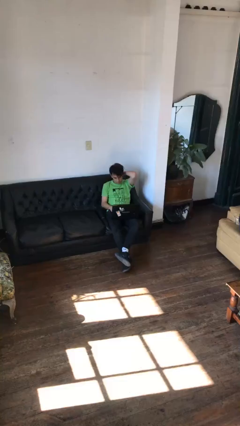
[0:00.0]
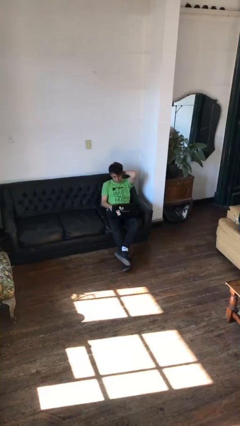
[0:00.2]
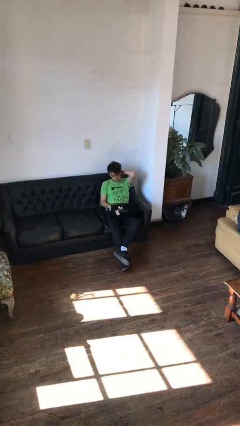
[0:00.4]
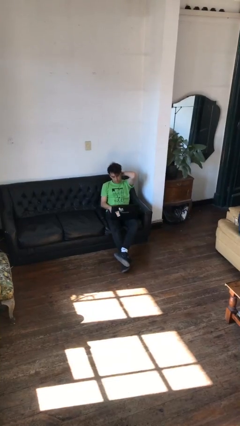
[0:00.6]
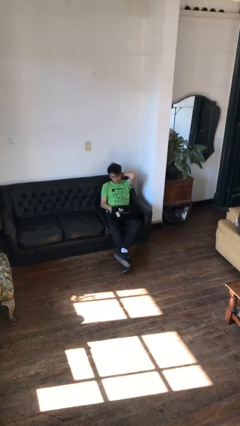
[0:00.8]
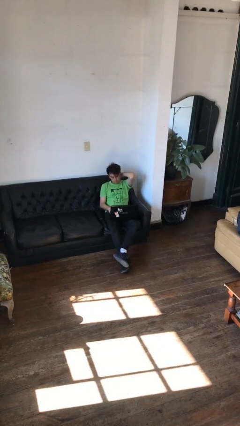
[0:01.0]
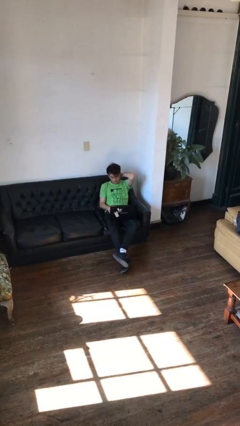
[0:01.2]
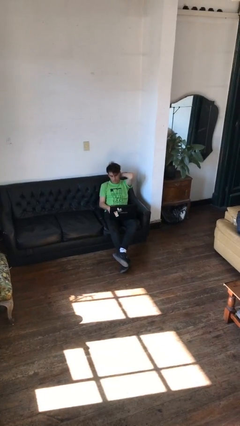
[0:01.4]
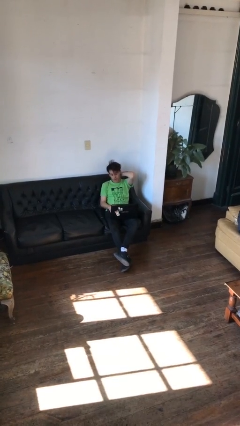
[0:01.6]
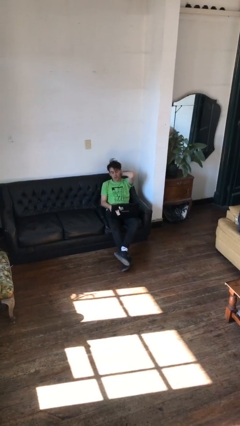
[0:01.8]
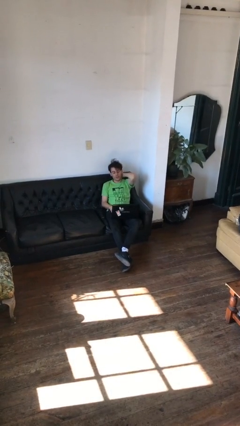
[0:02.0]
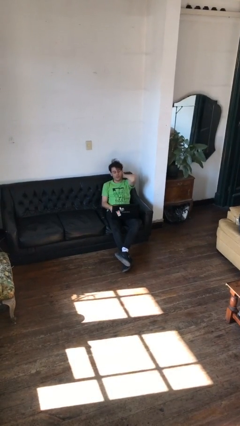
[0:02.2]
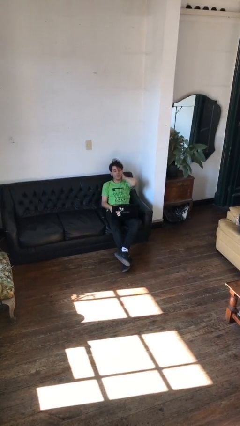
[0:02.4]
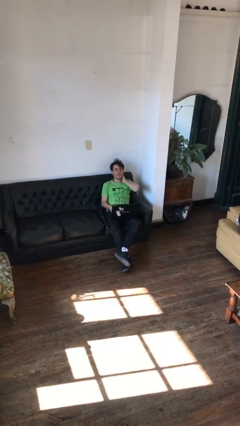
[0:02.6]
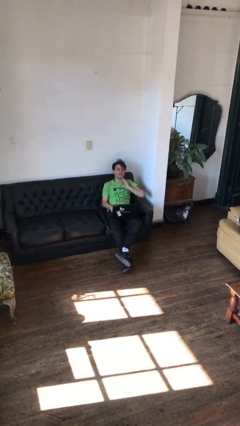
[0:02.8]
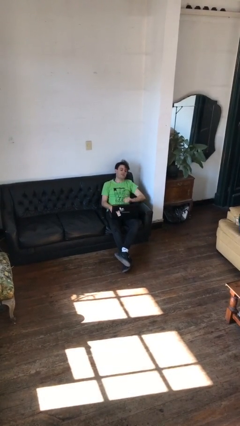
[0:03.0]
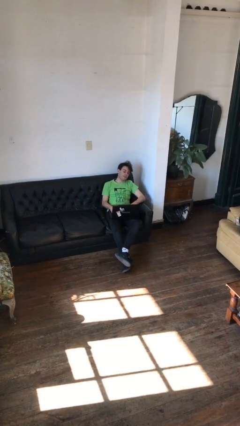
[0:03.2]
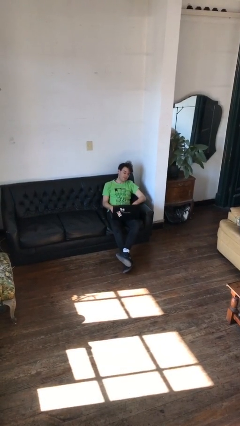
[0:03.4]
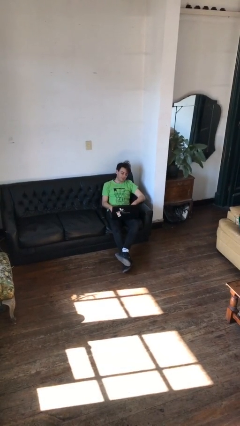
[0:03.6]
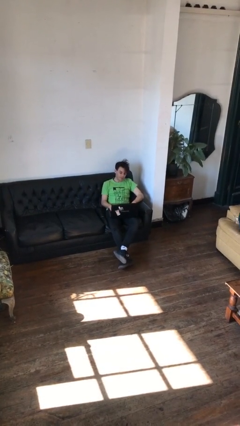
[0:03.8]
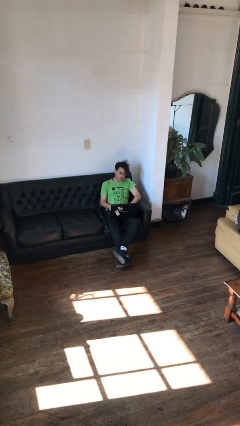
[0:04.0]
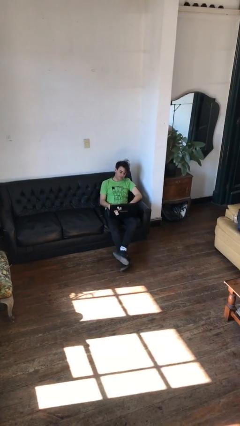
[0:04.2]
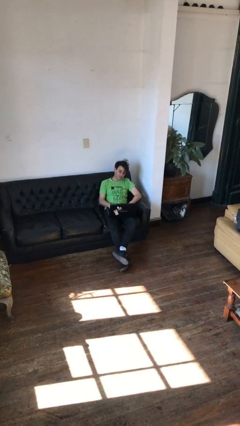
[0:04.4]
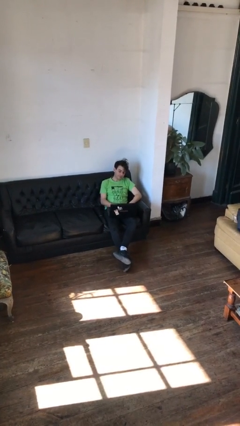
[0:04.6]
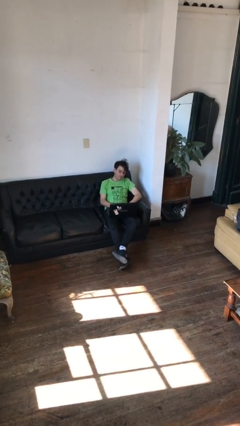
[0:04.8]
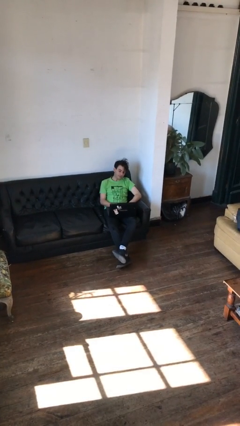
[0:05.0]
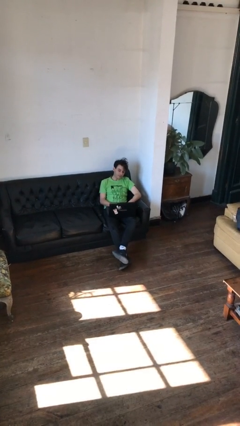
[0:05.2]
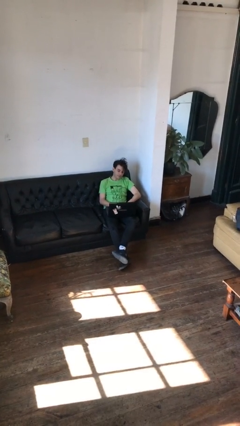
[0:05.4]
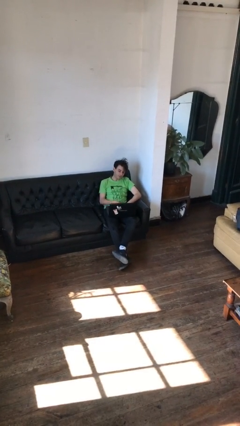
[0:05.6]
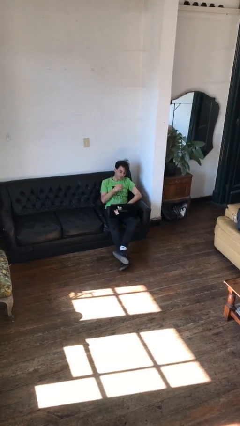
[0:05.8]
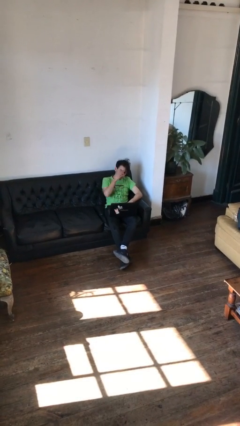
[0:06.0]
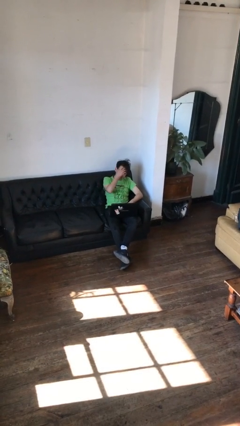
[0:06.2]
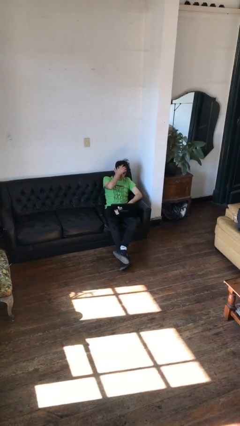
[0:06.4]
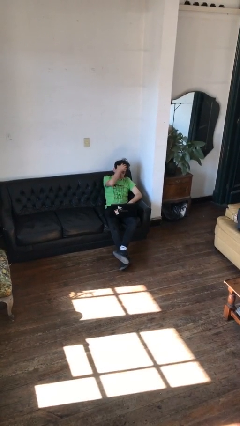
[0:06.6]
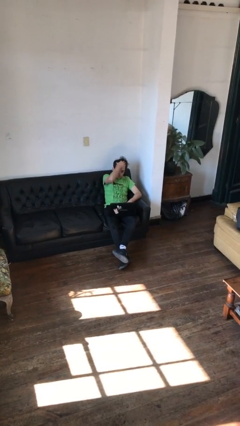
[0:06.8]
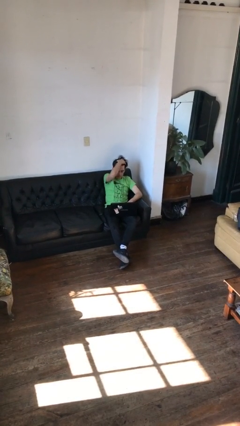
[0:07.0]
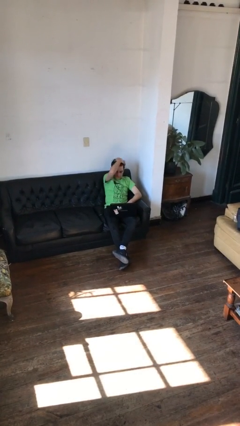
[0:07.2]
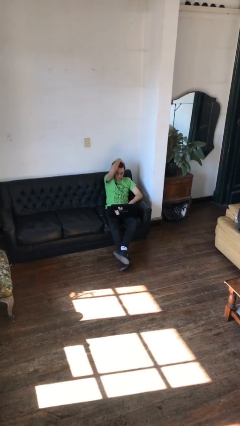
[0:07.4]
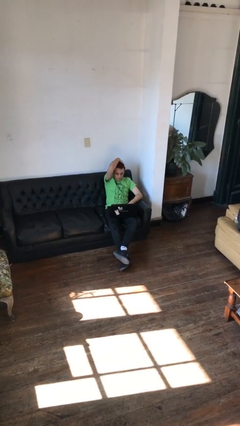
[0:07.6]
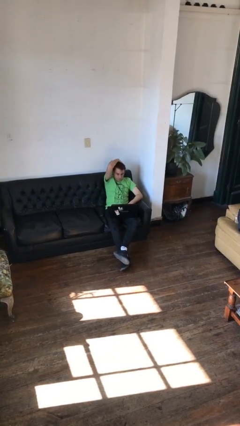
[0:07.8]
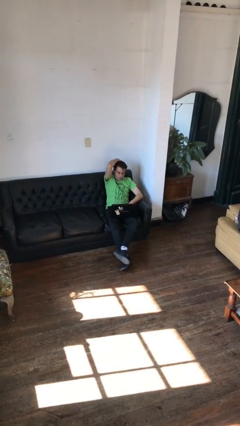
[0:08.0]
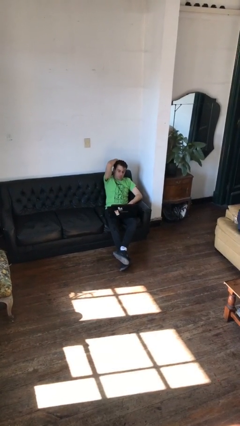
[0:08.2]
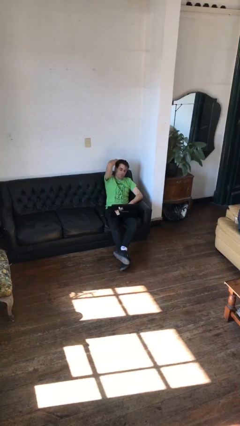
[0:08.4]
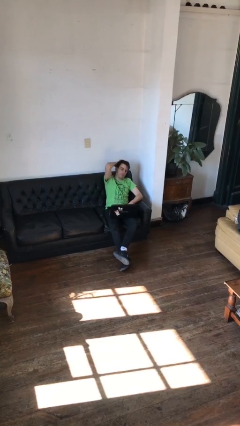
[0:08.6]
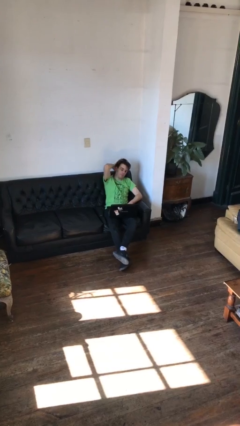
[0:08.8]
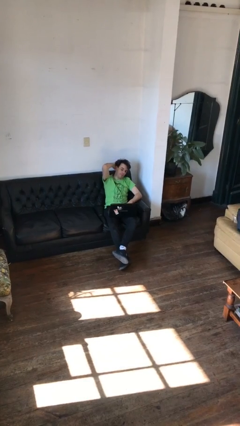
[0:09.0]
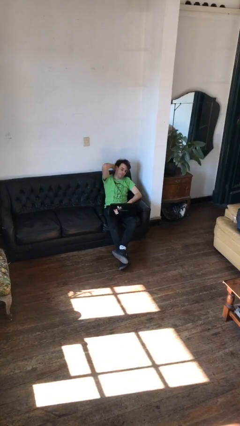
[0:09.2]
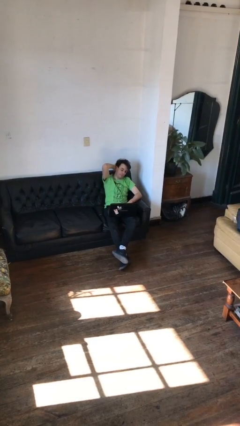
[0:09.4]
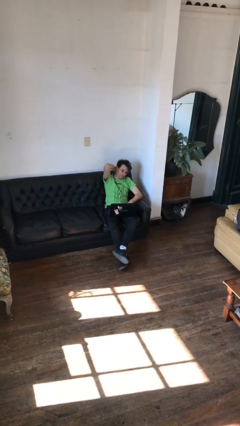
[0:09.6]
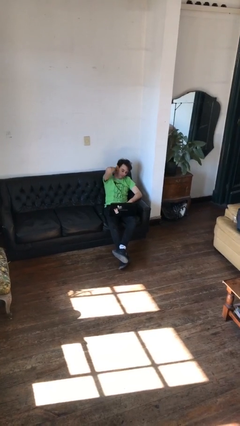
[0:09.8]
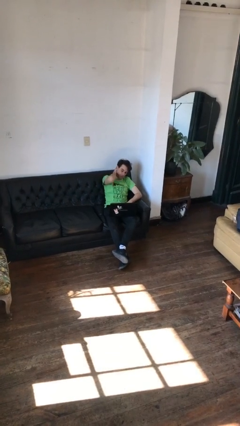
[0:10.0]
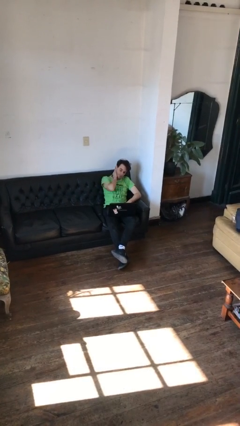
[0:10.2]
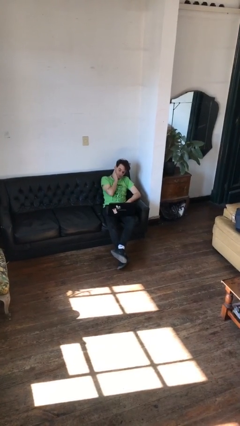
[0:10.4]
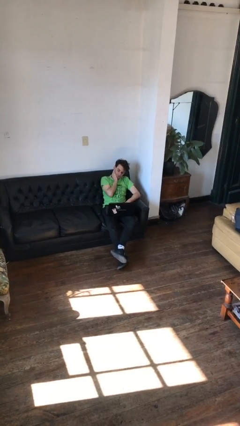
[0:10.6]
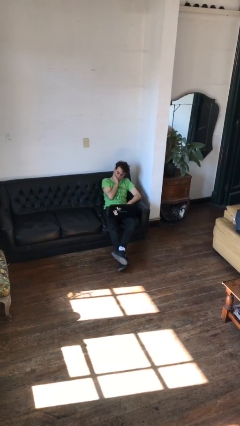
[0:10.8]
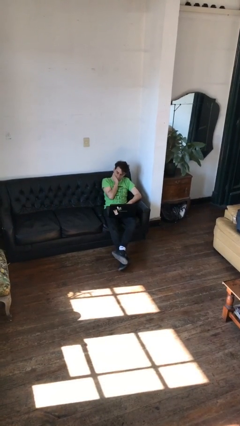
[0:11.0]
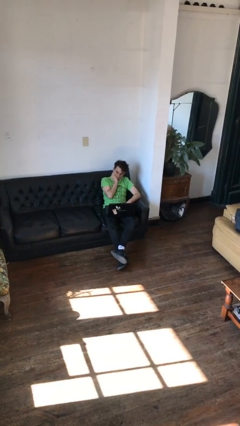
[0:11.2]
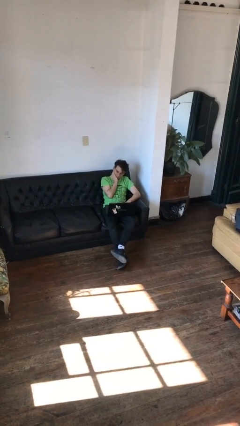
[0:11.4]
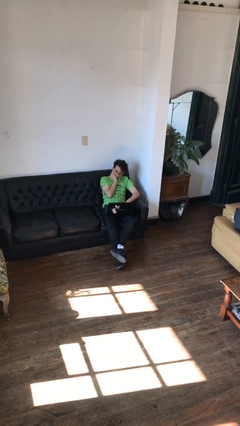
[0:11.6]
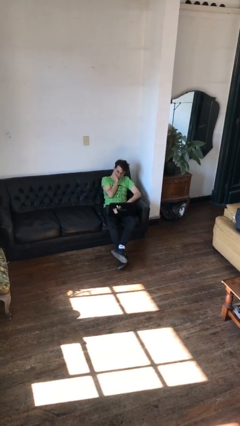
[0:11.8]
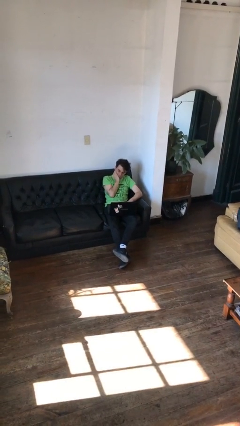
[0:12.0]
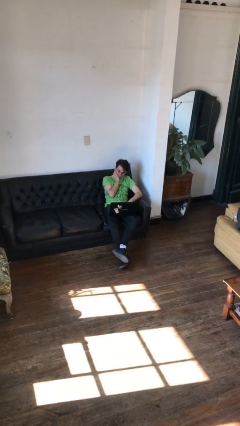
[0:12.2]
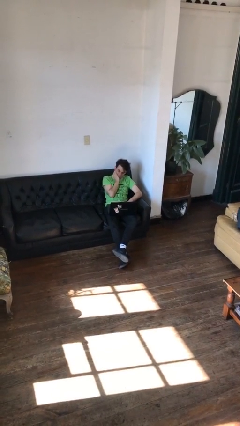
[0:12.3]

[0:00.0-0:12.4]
person interacts with laptop

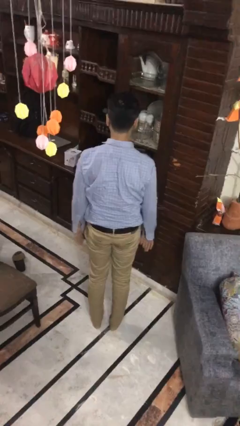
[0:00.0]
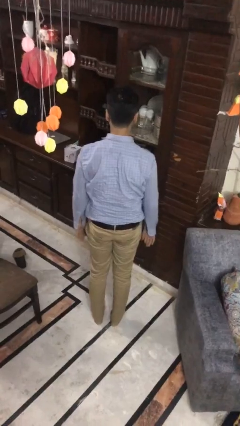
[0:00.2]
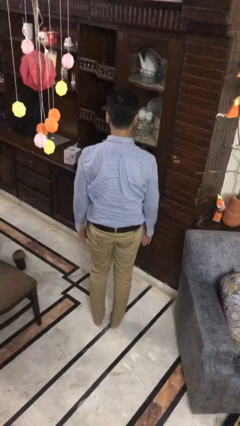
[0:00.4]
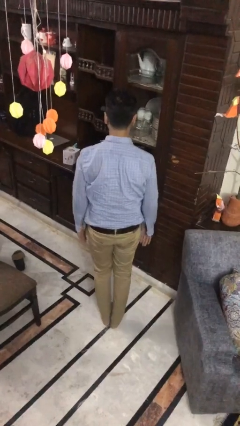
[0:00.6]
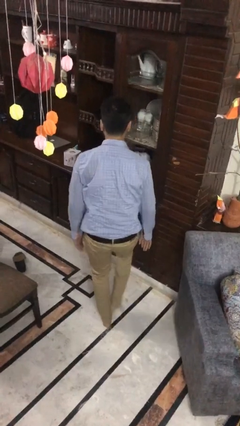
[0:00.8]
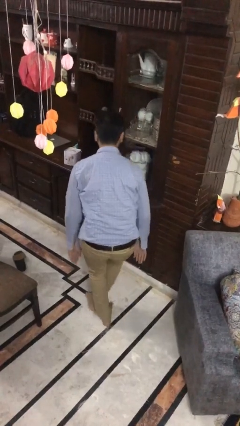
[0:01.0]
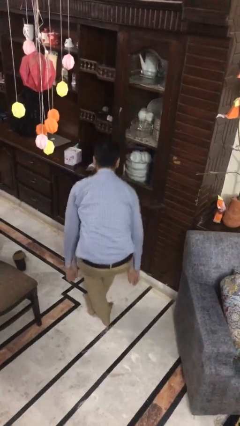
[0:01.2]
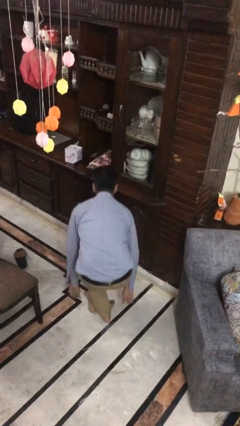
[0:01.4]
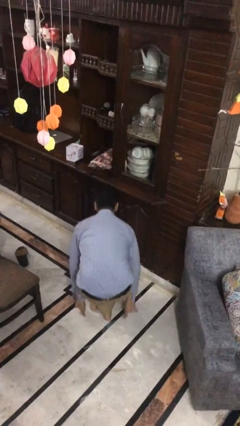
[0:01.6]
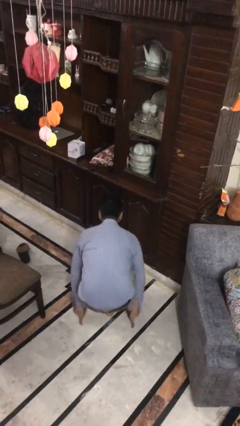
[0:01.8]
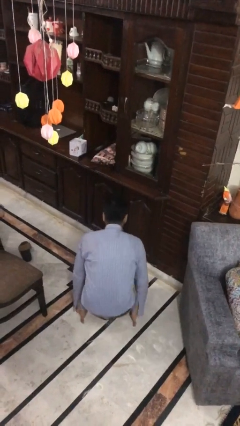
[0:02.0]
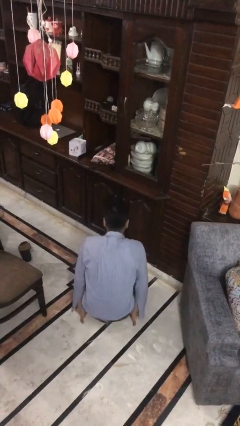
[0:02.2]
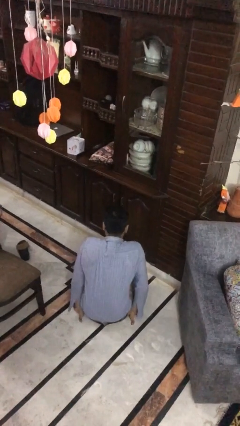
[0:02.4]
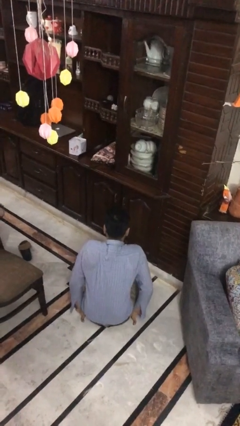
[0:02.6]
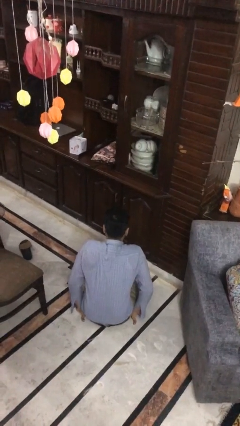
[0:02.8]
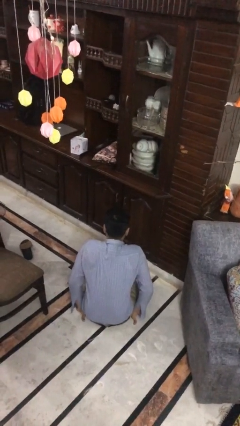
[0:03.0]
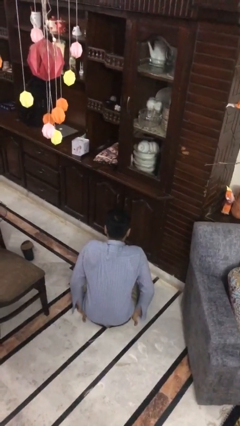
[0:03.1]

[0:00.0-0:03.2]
person sits crisscross

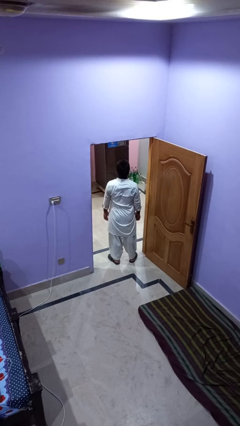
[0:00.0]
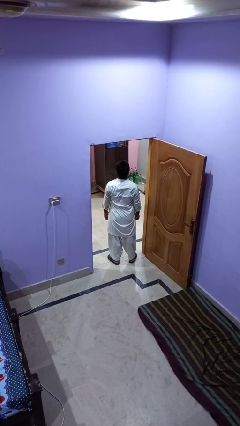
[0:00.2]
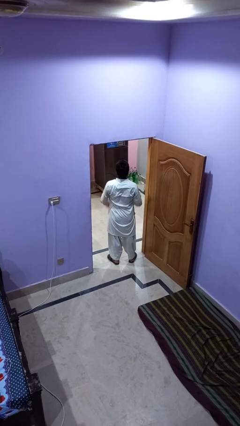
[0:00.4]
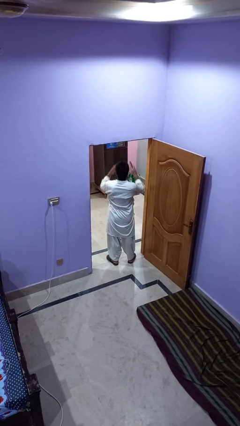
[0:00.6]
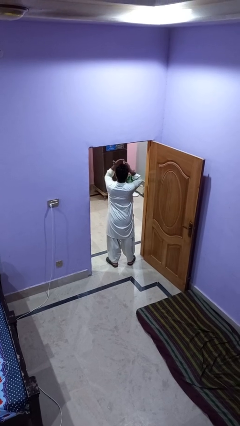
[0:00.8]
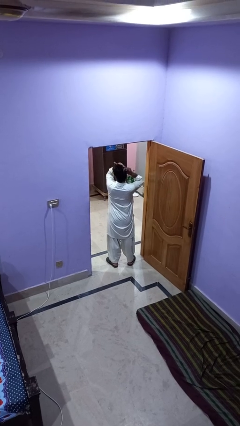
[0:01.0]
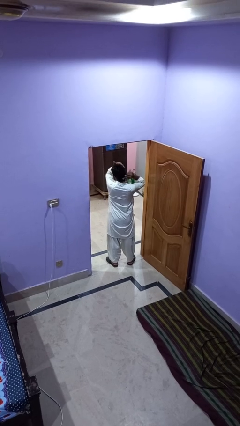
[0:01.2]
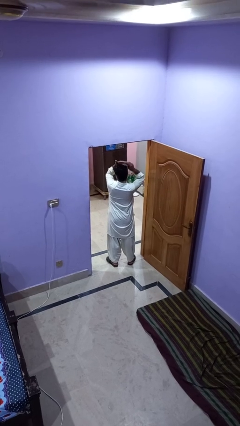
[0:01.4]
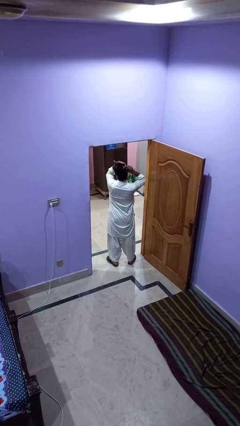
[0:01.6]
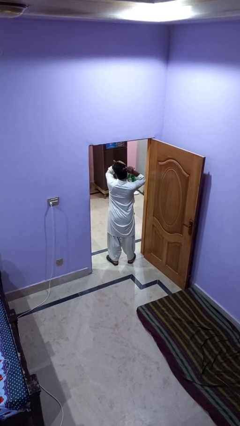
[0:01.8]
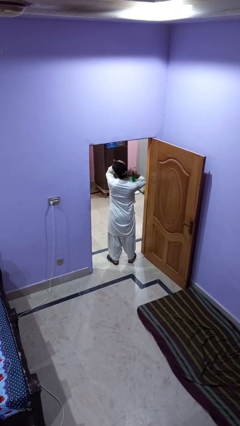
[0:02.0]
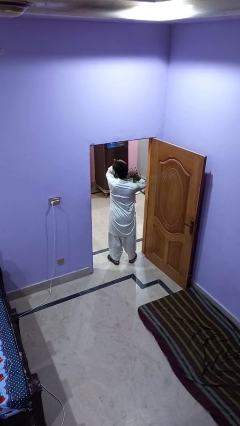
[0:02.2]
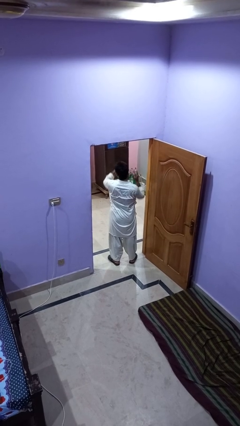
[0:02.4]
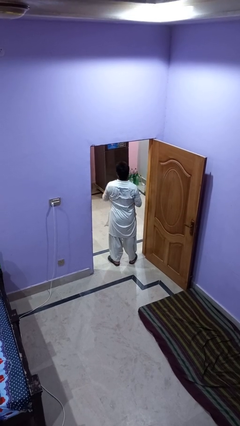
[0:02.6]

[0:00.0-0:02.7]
person brushes hair
